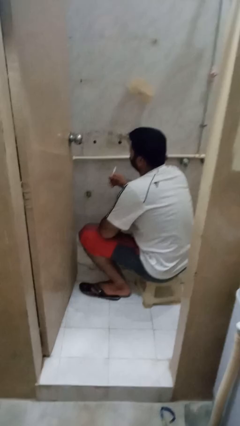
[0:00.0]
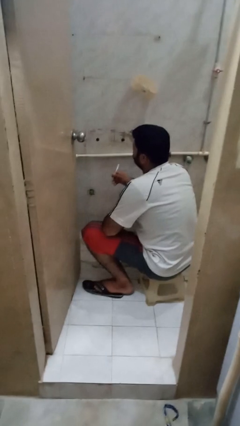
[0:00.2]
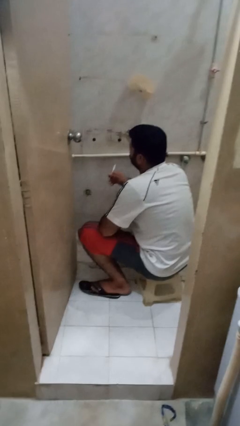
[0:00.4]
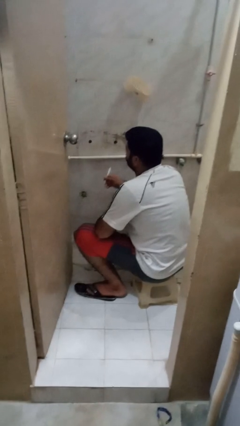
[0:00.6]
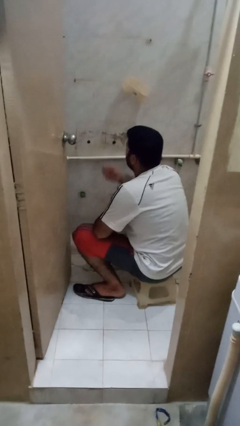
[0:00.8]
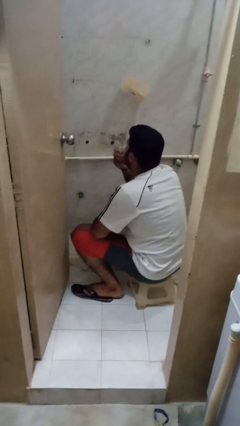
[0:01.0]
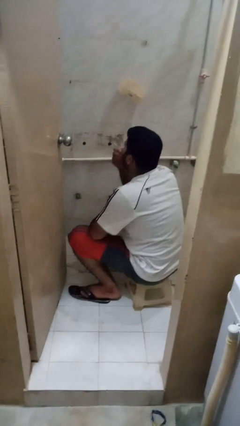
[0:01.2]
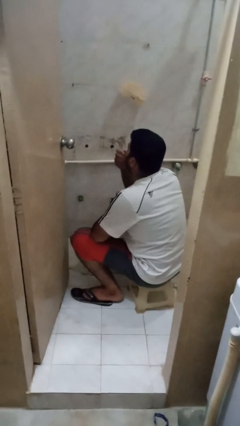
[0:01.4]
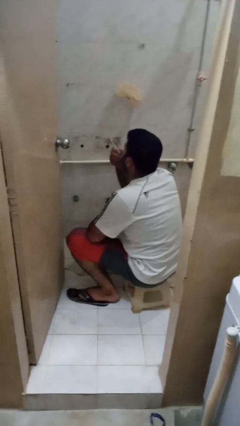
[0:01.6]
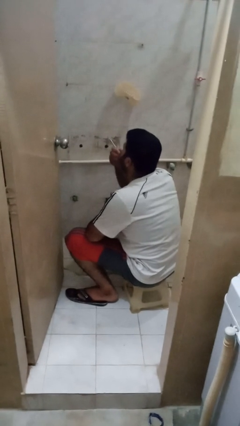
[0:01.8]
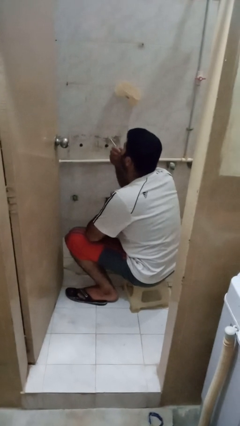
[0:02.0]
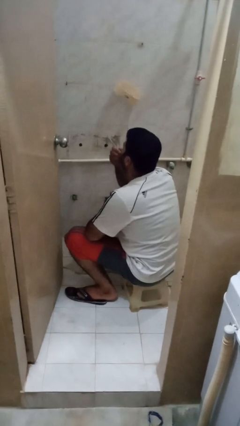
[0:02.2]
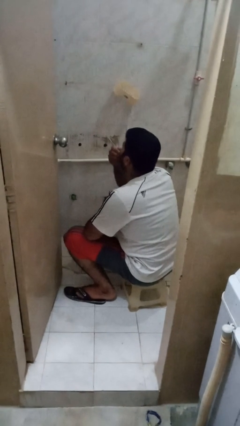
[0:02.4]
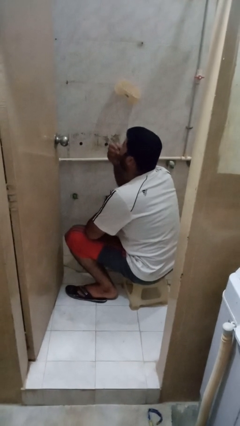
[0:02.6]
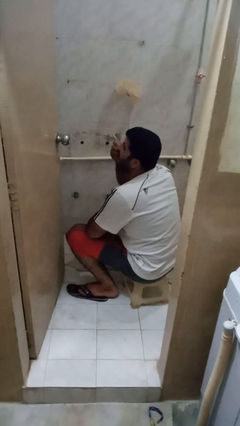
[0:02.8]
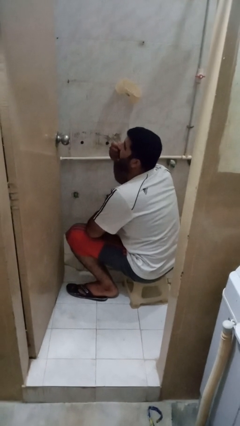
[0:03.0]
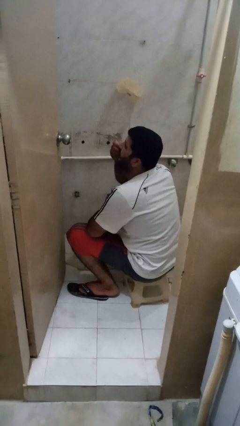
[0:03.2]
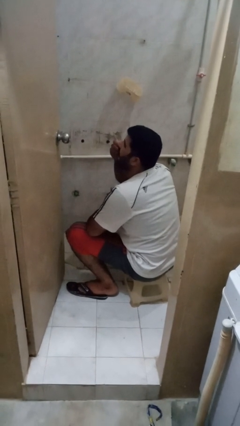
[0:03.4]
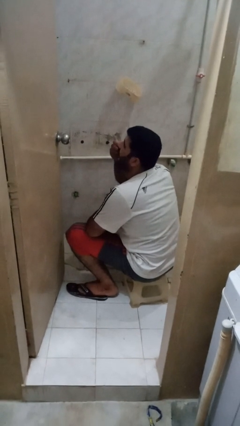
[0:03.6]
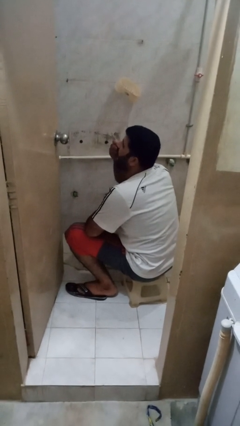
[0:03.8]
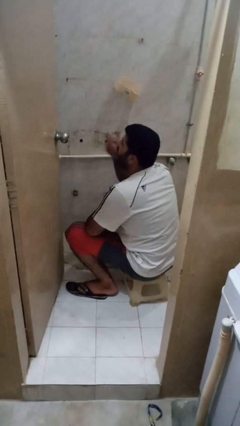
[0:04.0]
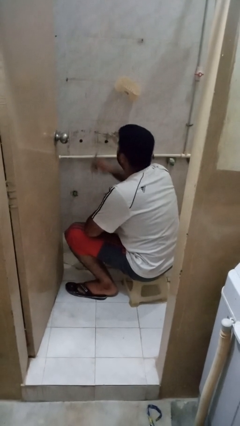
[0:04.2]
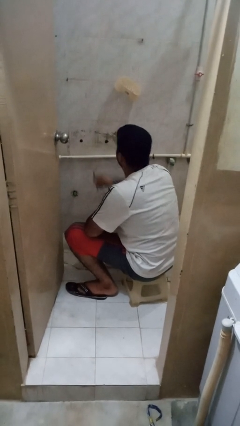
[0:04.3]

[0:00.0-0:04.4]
person flosses

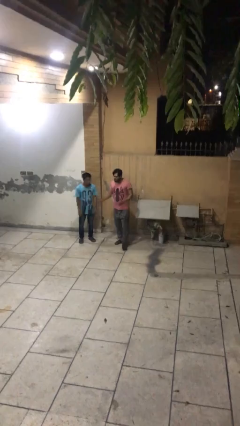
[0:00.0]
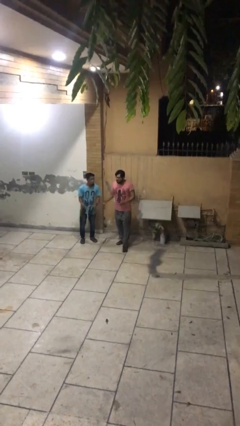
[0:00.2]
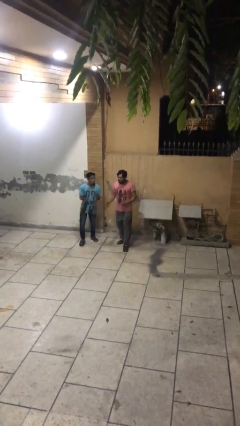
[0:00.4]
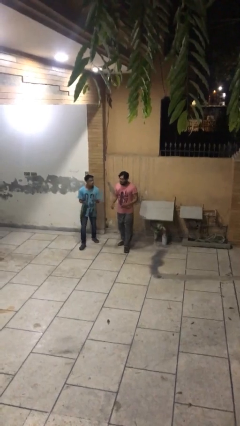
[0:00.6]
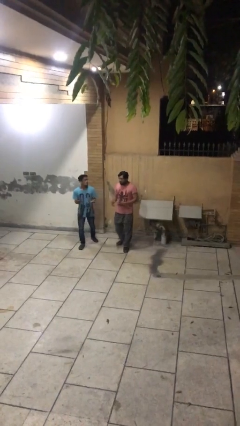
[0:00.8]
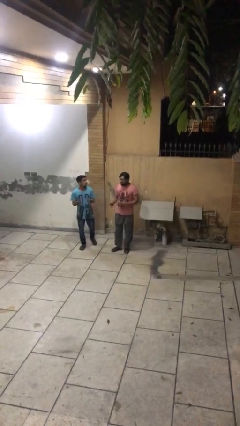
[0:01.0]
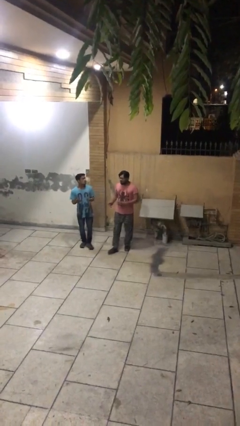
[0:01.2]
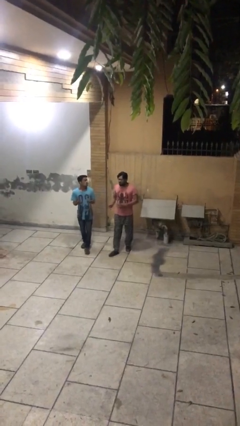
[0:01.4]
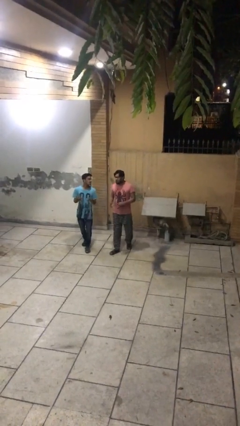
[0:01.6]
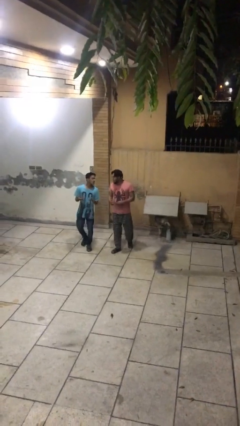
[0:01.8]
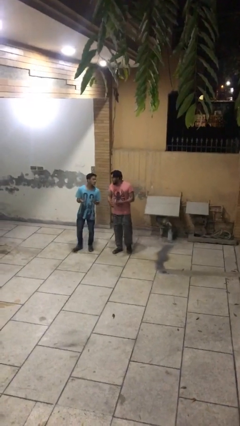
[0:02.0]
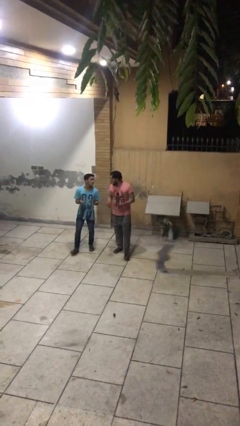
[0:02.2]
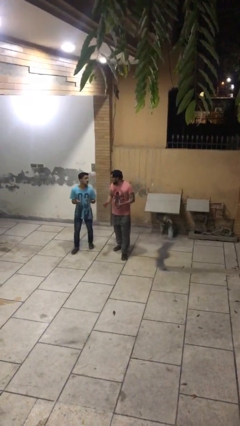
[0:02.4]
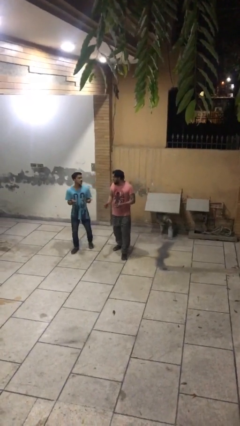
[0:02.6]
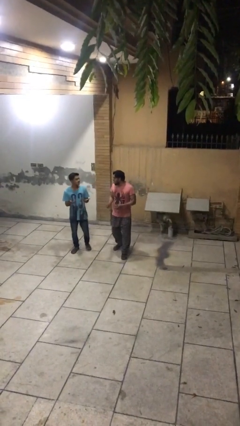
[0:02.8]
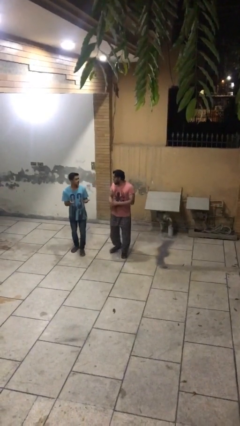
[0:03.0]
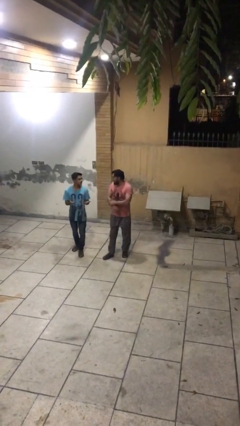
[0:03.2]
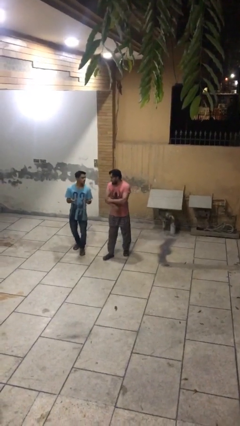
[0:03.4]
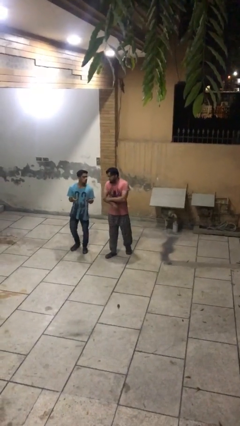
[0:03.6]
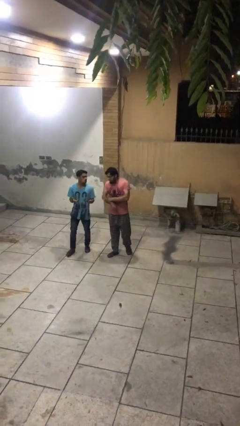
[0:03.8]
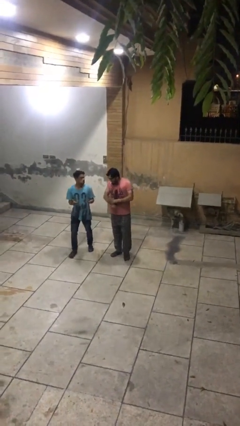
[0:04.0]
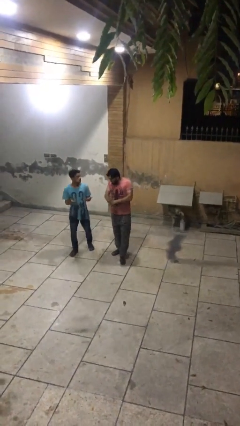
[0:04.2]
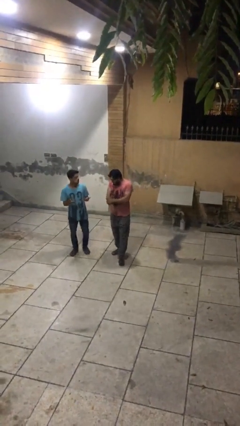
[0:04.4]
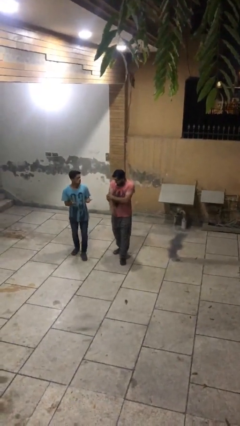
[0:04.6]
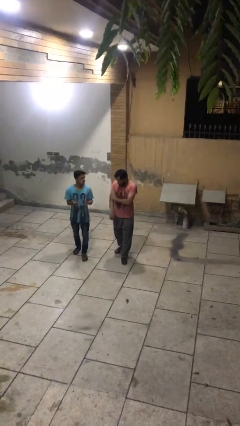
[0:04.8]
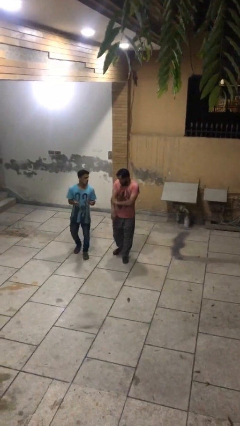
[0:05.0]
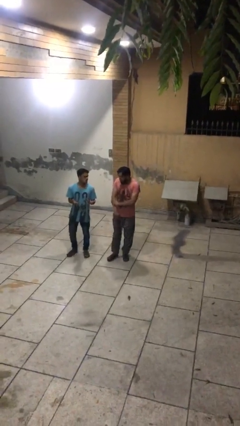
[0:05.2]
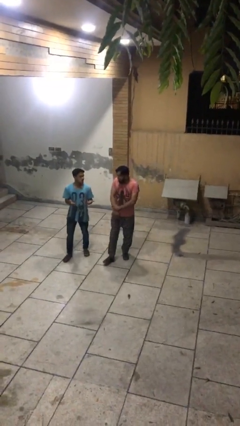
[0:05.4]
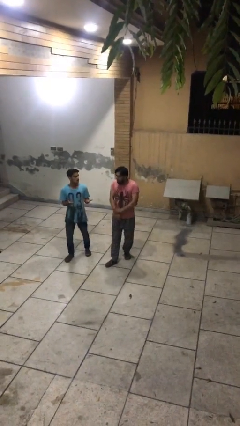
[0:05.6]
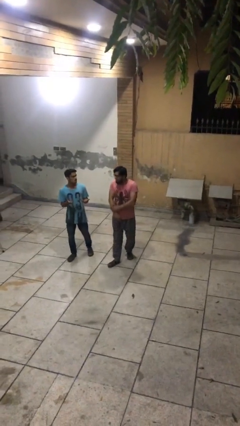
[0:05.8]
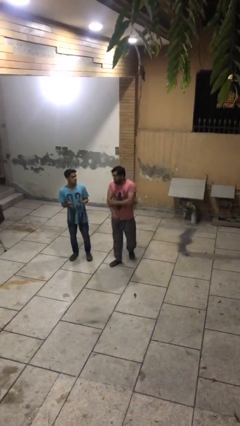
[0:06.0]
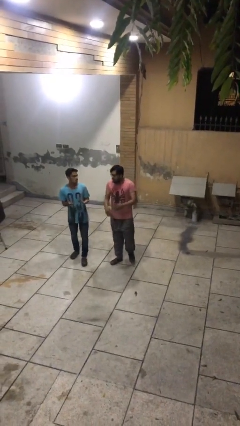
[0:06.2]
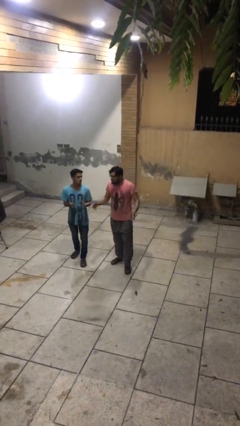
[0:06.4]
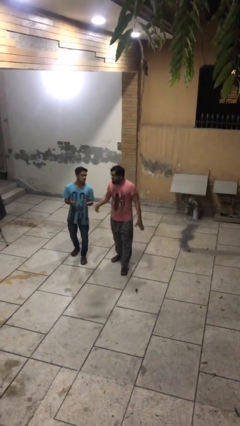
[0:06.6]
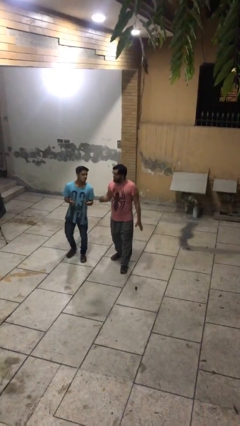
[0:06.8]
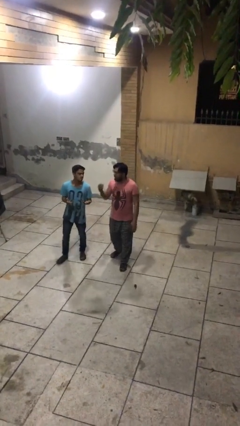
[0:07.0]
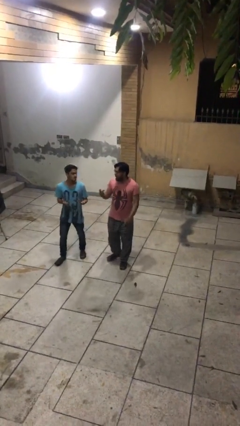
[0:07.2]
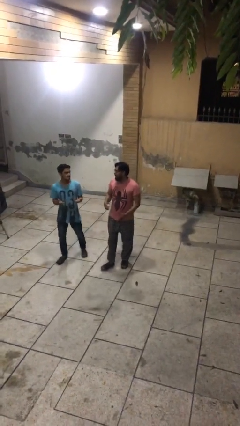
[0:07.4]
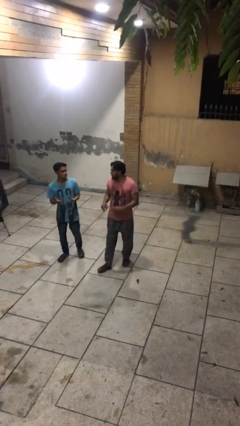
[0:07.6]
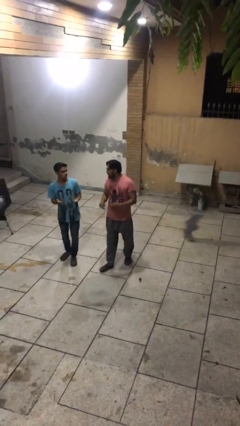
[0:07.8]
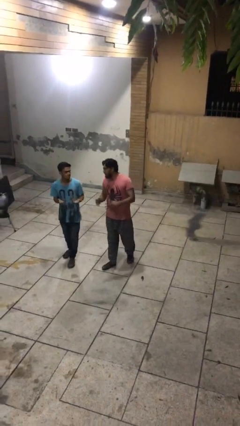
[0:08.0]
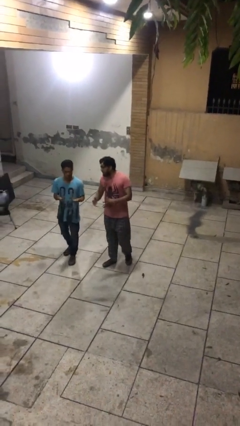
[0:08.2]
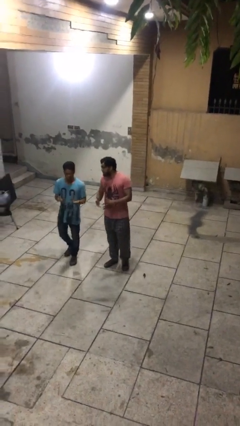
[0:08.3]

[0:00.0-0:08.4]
person talks to person

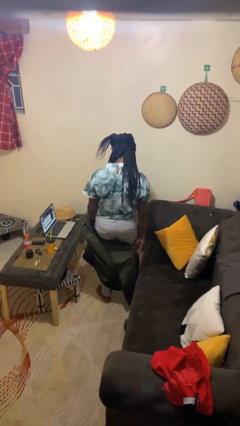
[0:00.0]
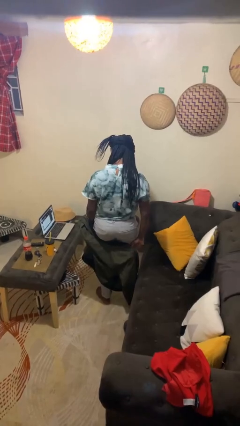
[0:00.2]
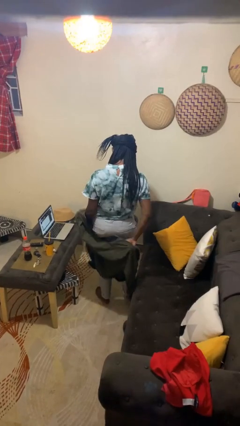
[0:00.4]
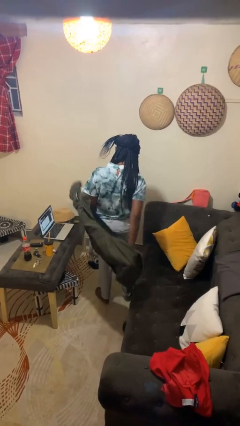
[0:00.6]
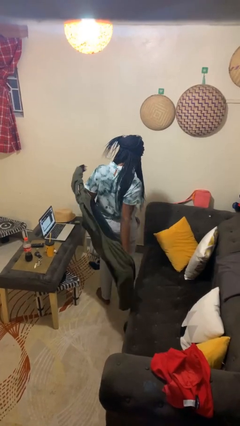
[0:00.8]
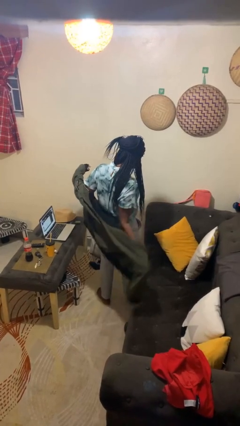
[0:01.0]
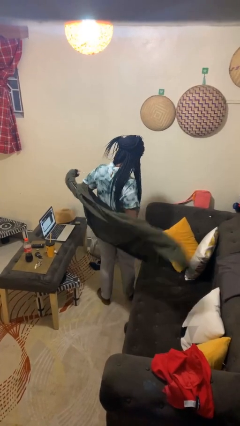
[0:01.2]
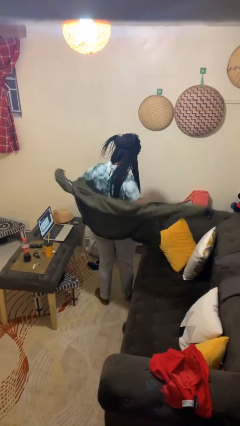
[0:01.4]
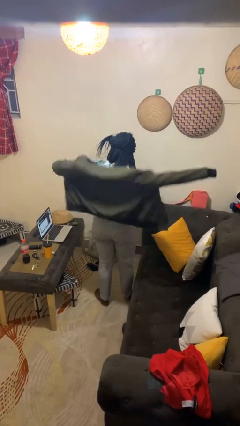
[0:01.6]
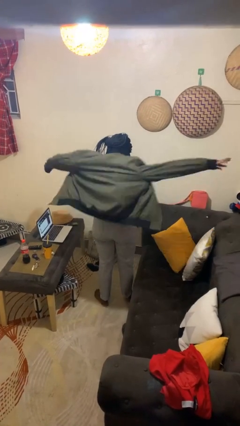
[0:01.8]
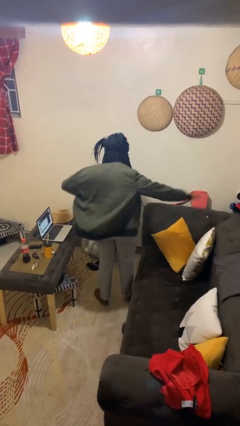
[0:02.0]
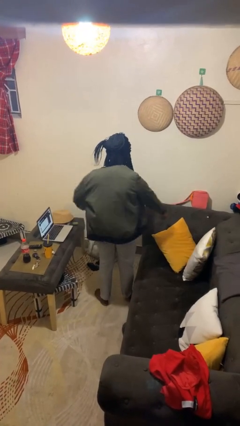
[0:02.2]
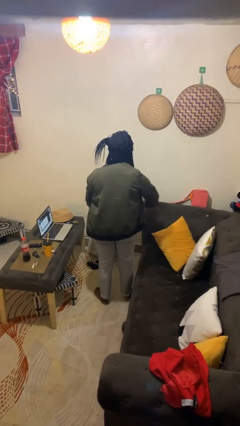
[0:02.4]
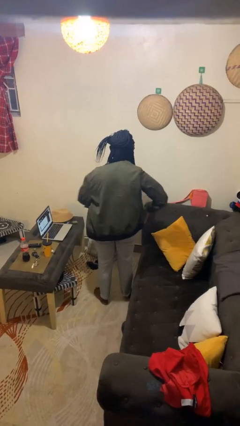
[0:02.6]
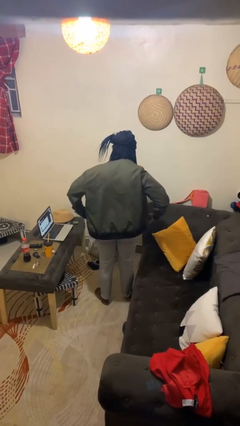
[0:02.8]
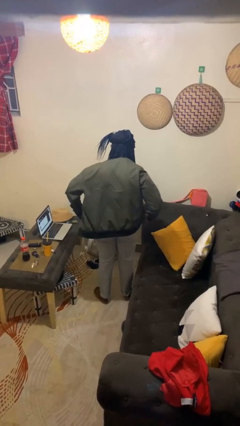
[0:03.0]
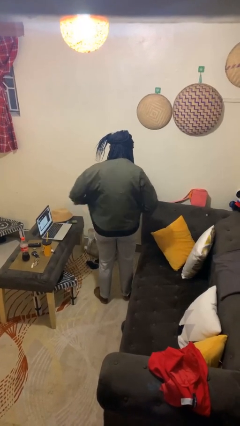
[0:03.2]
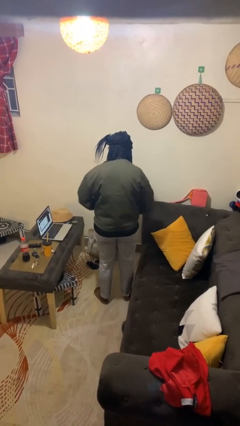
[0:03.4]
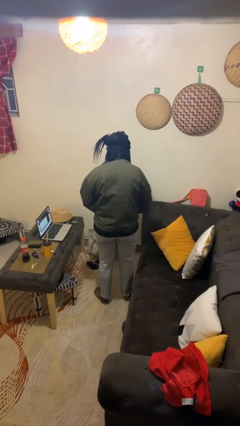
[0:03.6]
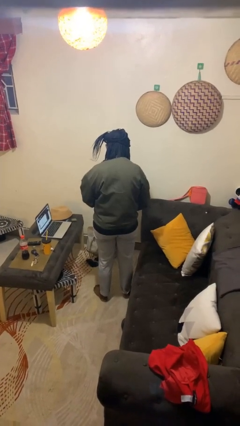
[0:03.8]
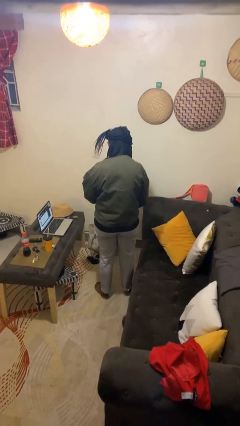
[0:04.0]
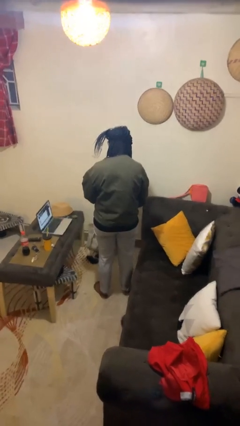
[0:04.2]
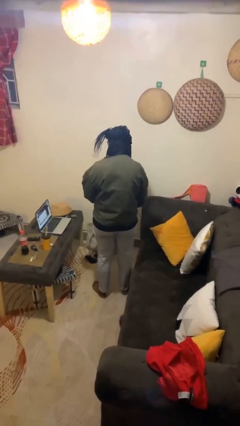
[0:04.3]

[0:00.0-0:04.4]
person puts on jacket

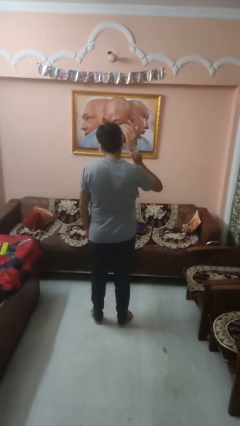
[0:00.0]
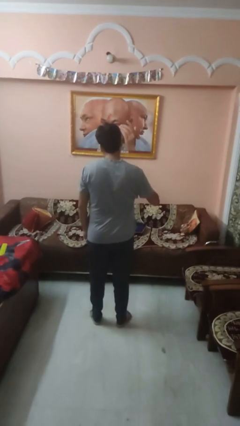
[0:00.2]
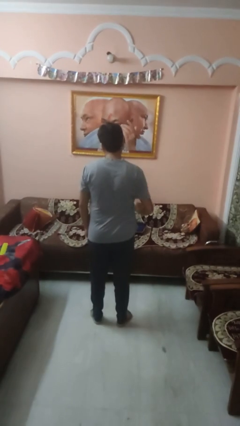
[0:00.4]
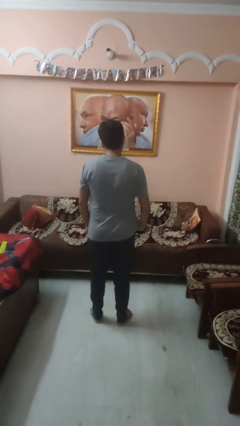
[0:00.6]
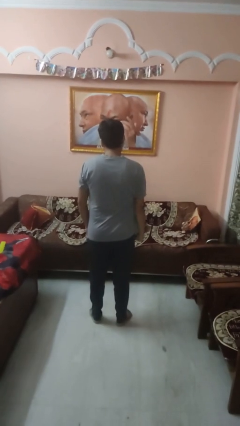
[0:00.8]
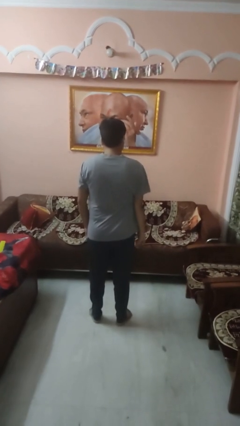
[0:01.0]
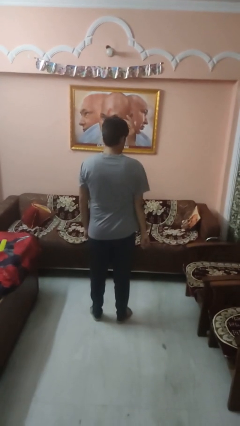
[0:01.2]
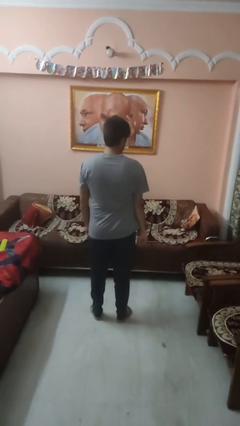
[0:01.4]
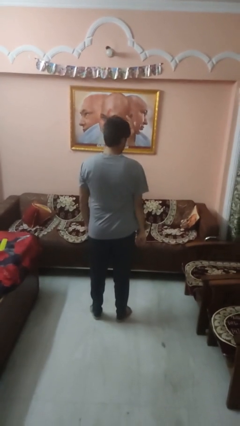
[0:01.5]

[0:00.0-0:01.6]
person gestures lower hand
